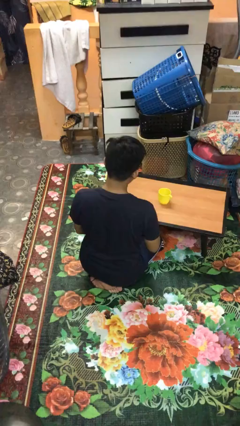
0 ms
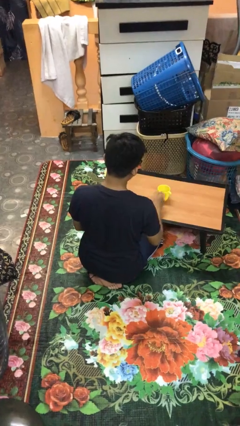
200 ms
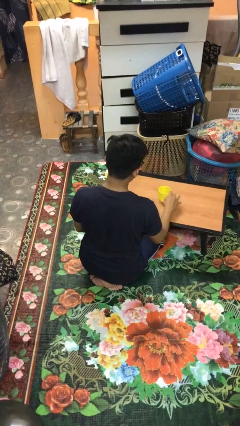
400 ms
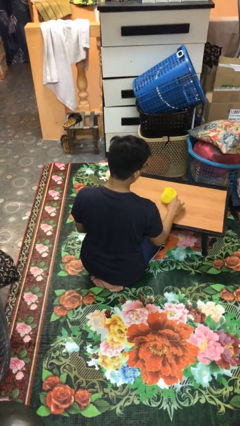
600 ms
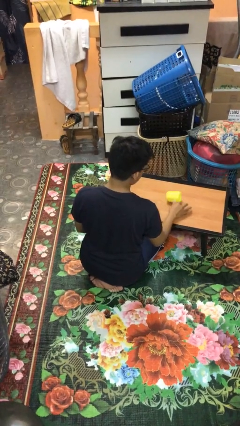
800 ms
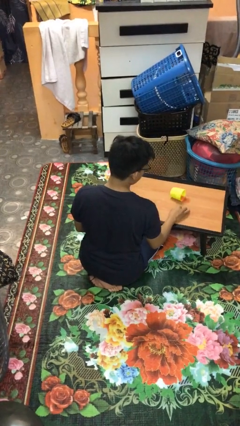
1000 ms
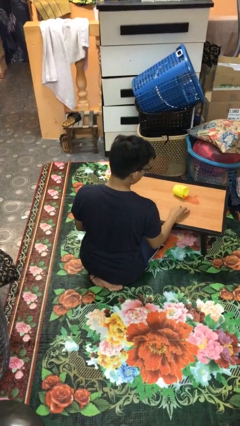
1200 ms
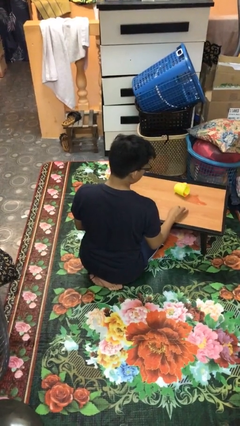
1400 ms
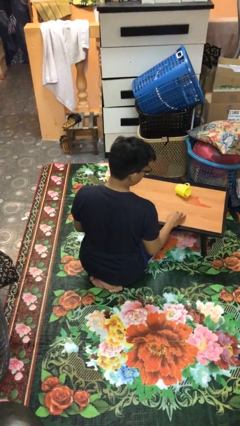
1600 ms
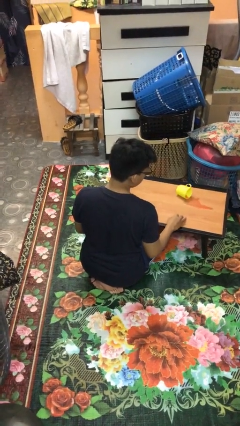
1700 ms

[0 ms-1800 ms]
person spills on table
